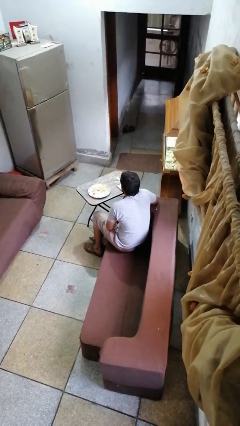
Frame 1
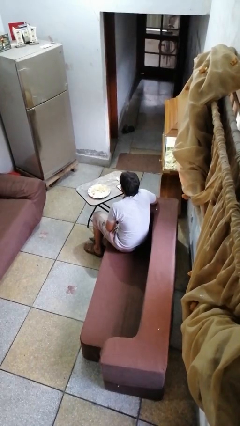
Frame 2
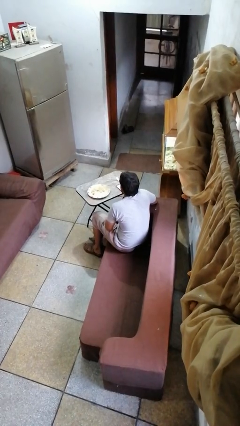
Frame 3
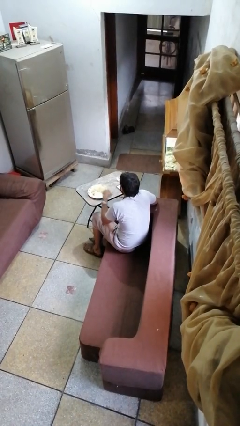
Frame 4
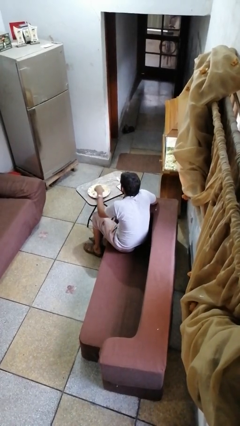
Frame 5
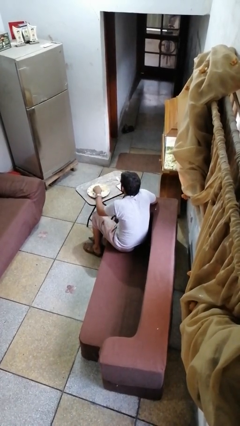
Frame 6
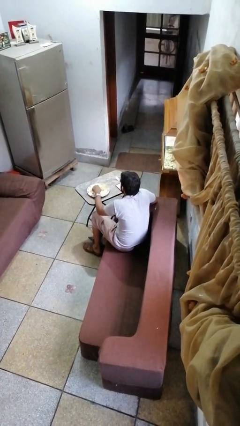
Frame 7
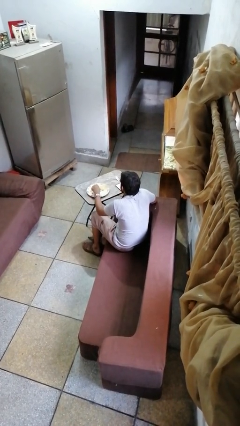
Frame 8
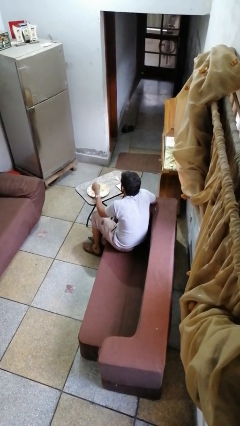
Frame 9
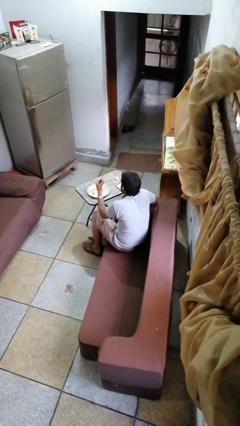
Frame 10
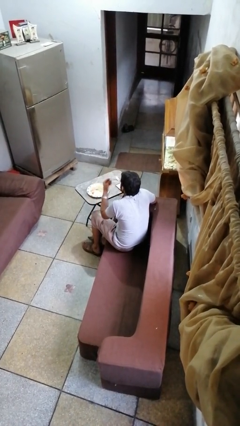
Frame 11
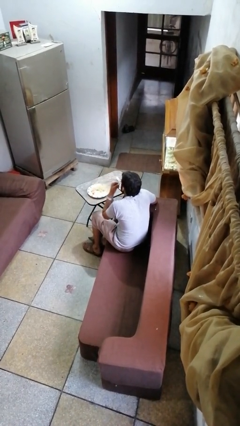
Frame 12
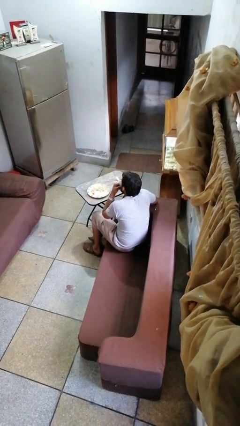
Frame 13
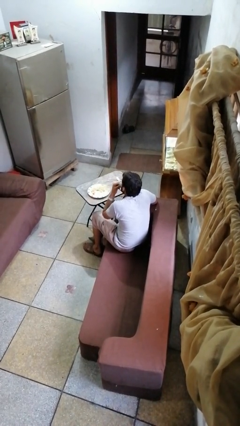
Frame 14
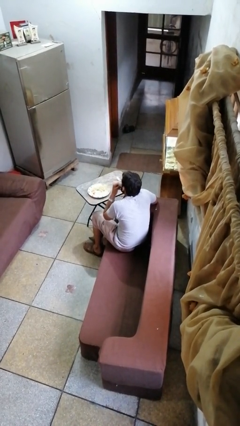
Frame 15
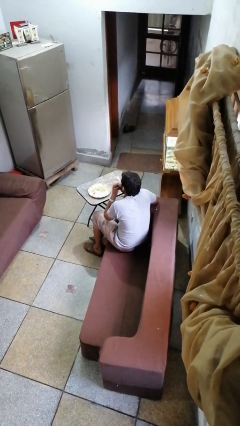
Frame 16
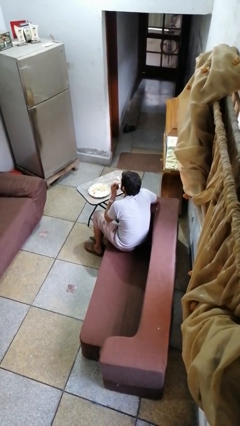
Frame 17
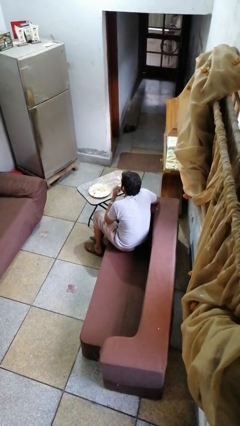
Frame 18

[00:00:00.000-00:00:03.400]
person eats with hands

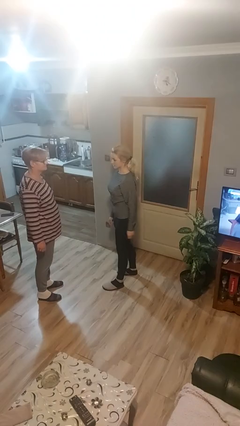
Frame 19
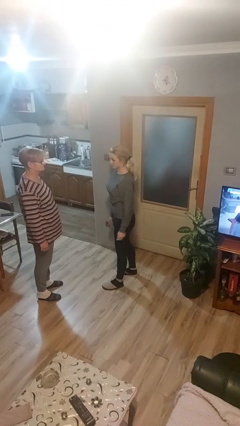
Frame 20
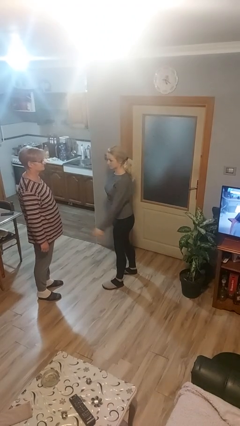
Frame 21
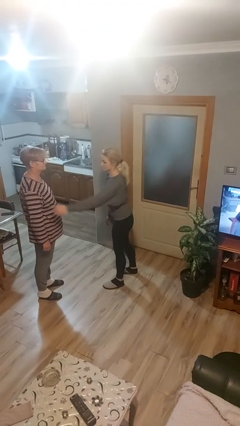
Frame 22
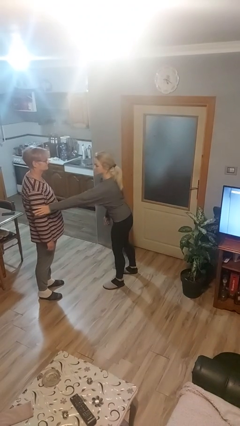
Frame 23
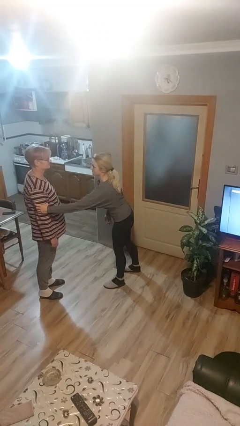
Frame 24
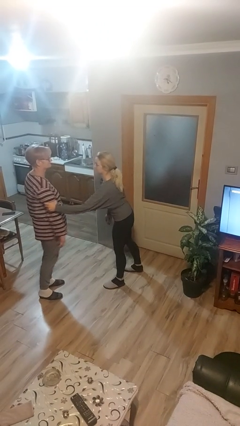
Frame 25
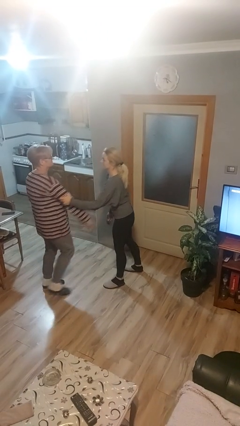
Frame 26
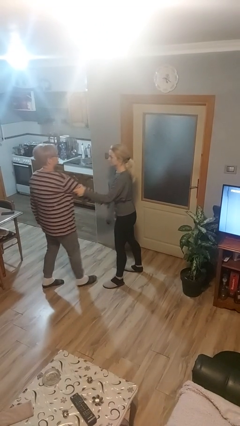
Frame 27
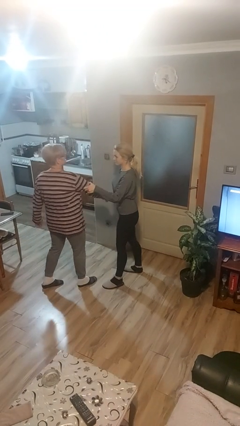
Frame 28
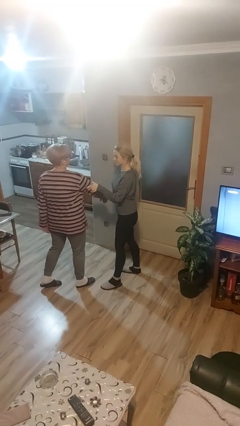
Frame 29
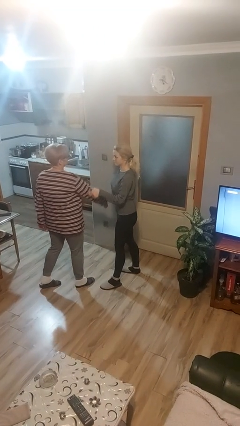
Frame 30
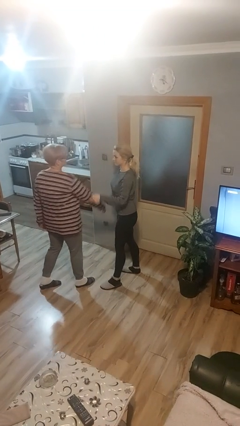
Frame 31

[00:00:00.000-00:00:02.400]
person grabs person by bicep

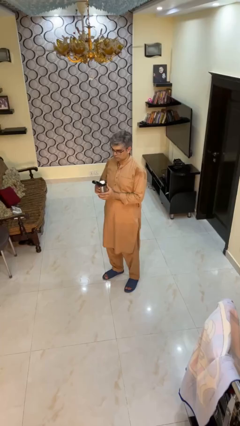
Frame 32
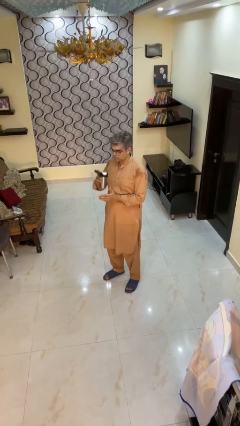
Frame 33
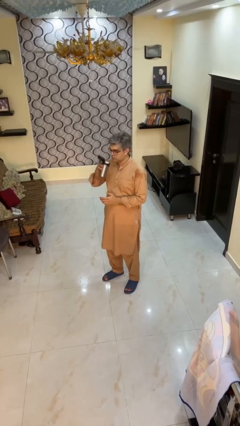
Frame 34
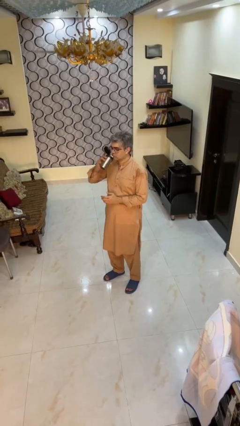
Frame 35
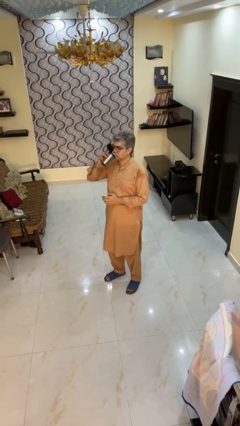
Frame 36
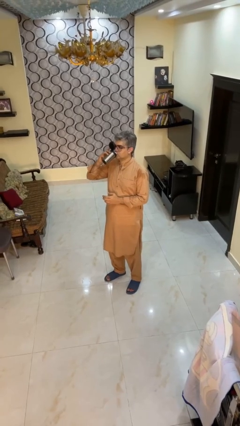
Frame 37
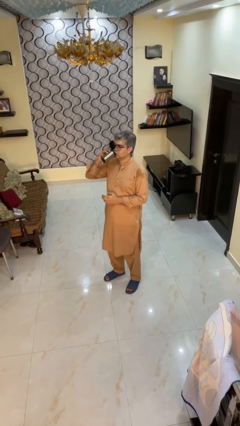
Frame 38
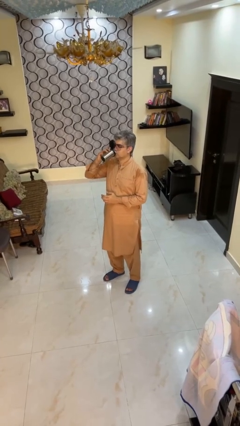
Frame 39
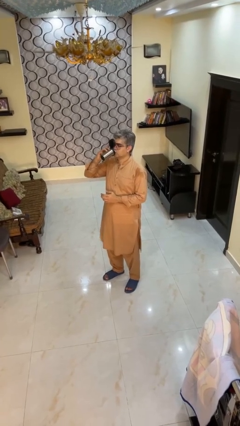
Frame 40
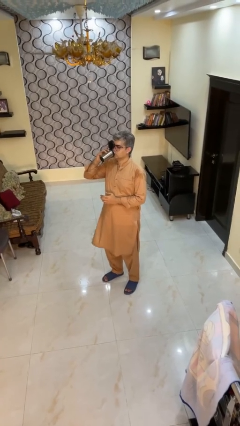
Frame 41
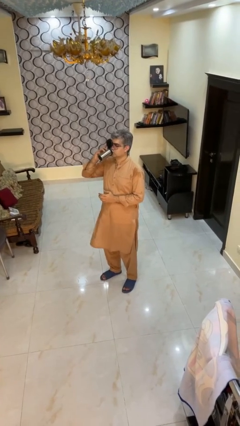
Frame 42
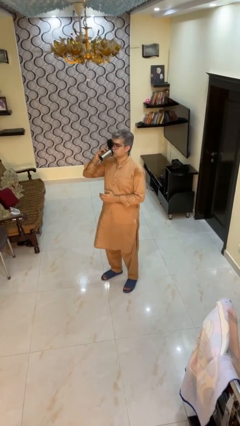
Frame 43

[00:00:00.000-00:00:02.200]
person drinks from beverage can

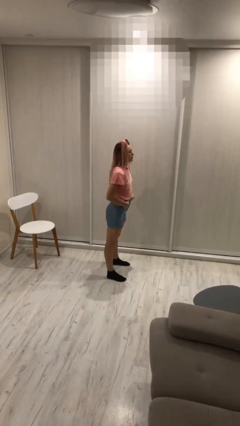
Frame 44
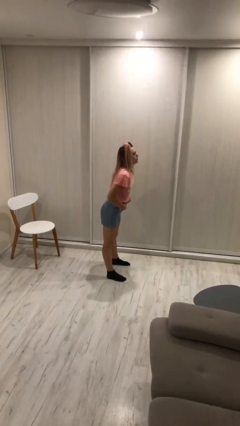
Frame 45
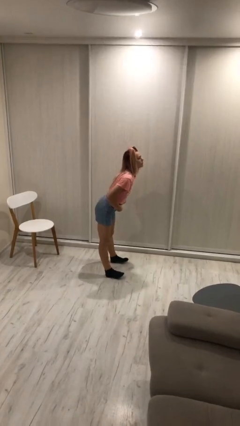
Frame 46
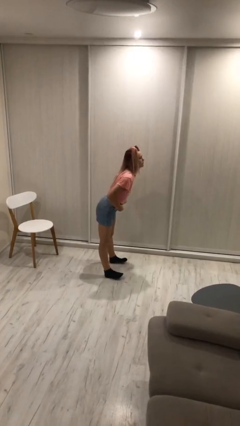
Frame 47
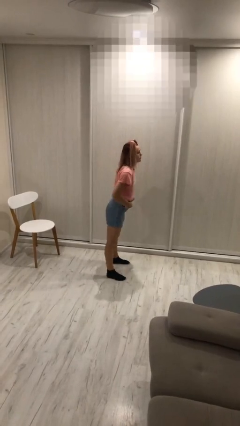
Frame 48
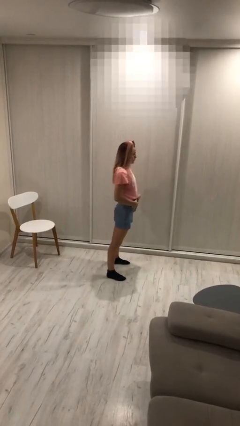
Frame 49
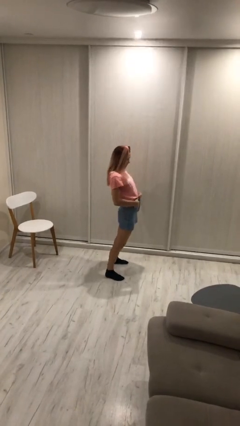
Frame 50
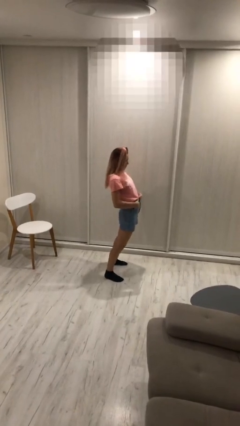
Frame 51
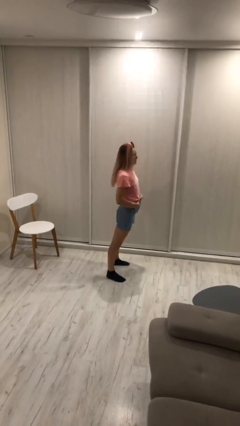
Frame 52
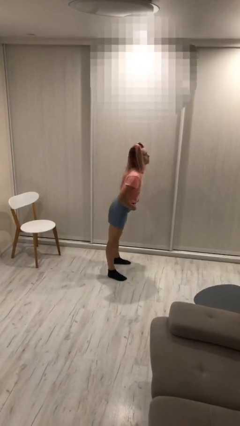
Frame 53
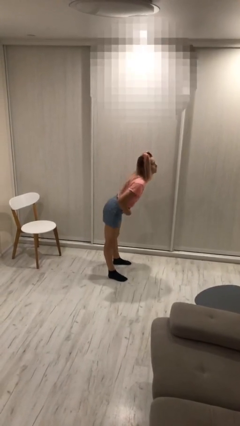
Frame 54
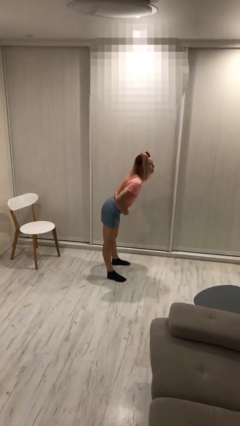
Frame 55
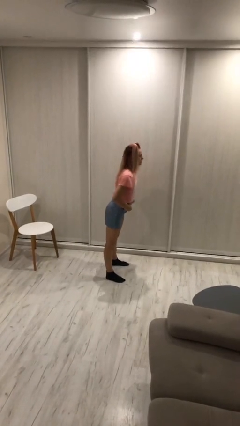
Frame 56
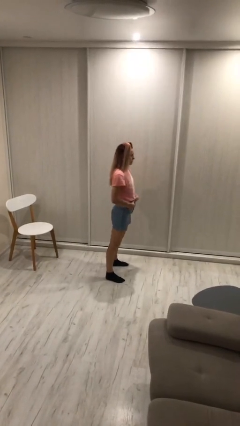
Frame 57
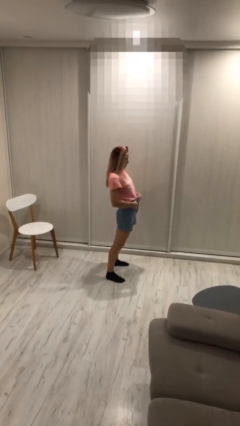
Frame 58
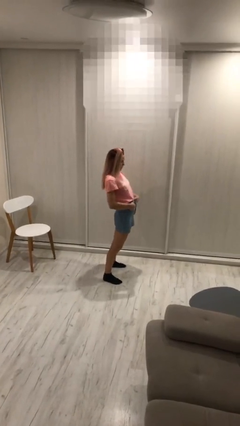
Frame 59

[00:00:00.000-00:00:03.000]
person wiggles hips

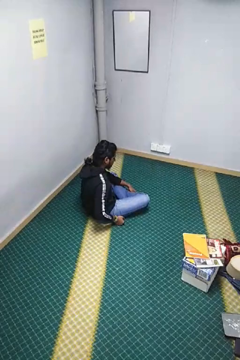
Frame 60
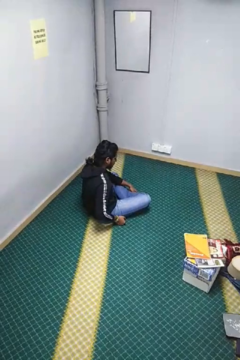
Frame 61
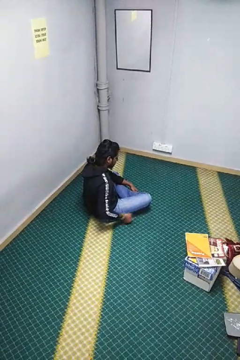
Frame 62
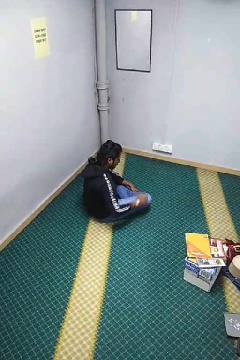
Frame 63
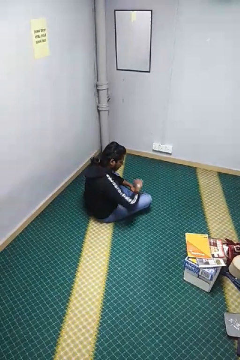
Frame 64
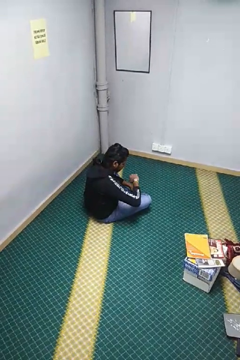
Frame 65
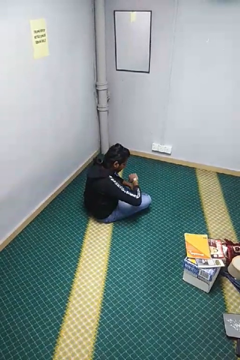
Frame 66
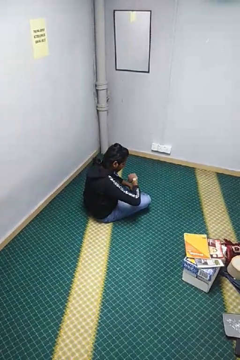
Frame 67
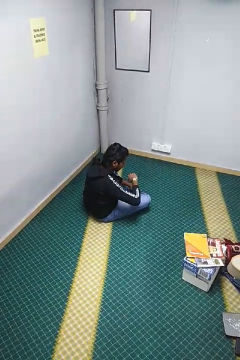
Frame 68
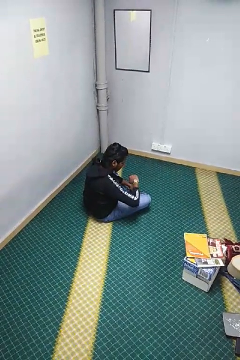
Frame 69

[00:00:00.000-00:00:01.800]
person looks at wristwatch

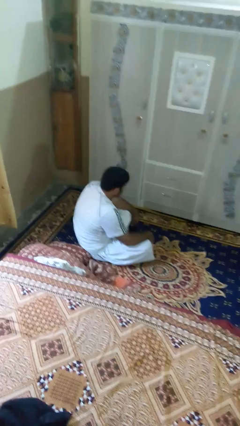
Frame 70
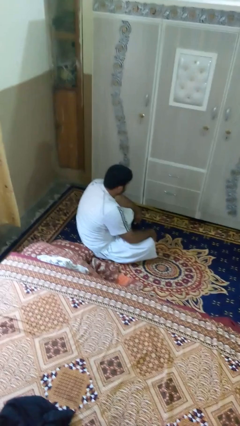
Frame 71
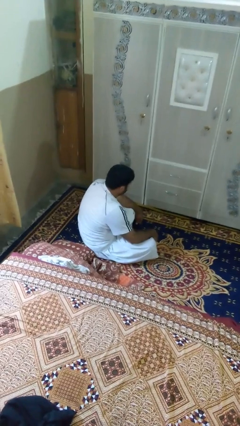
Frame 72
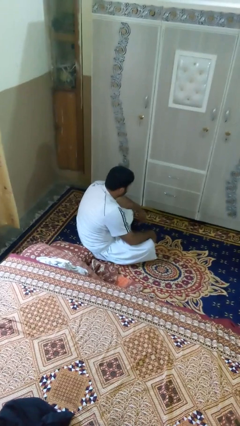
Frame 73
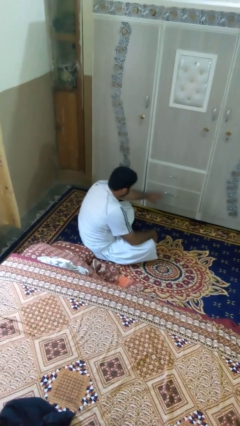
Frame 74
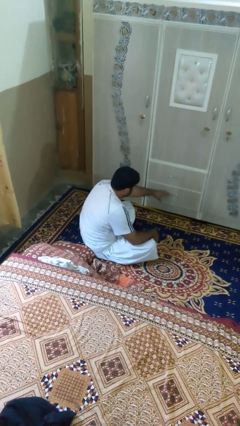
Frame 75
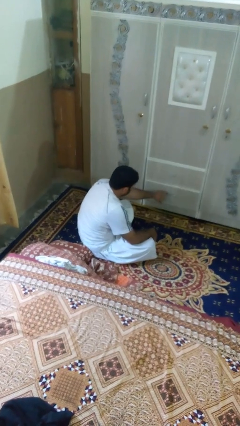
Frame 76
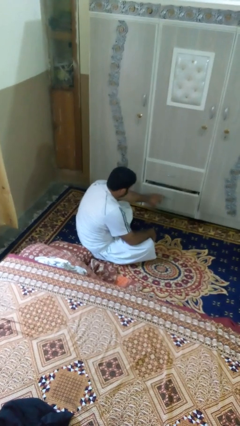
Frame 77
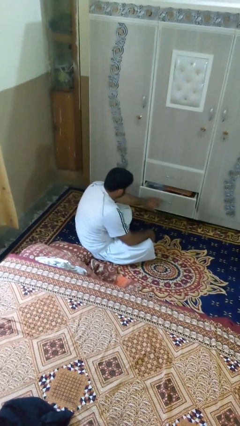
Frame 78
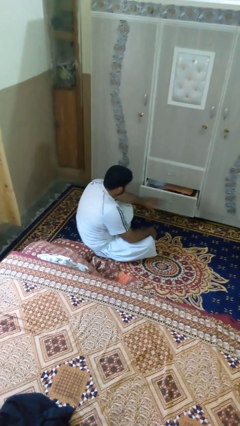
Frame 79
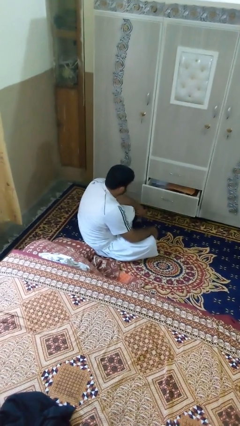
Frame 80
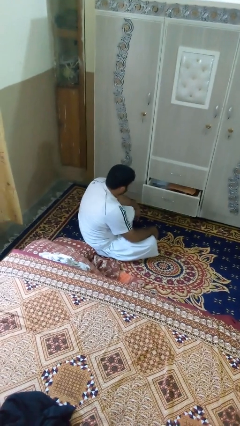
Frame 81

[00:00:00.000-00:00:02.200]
person opens dresser drawer

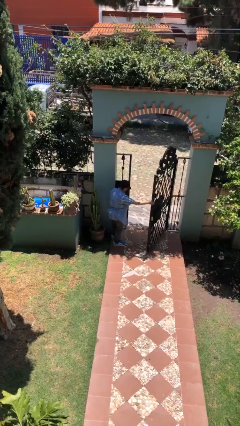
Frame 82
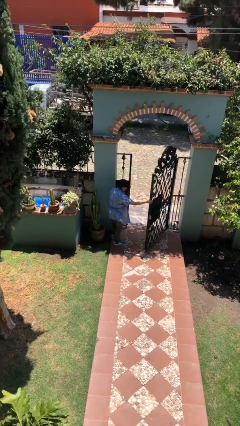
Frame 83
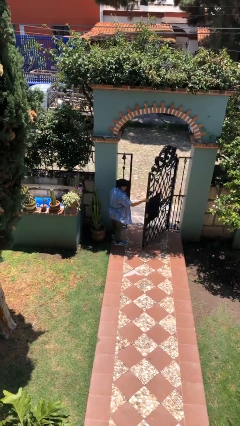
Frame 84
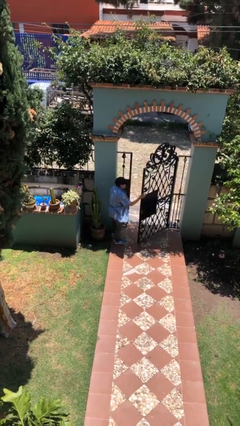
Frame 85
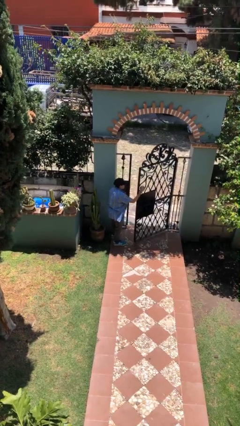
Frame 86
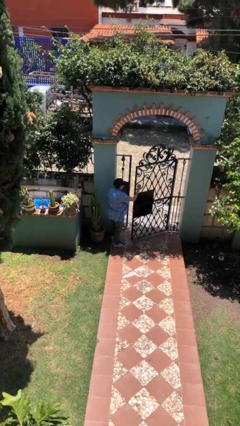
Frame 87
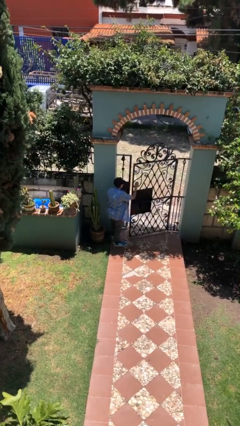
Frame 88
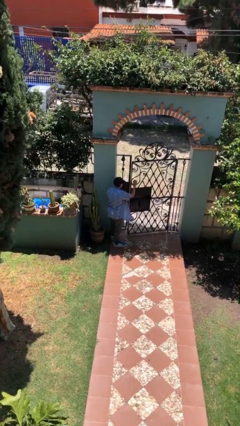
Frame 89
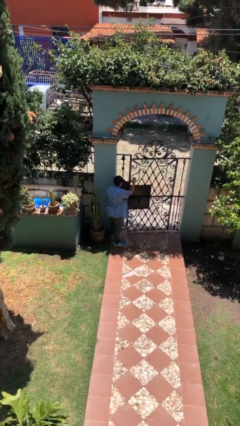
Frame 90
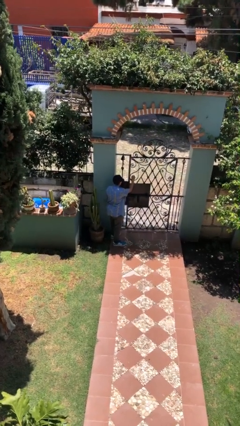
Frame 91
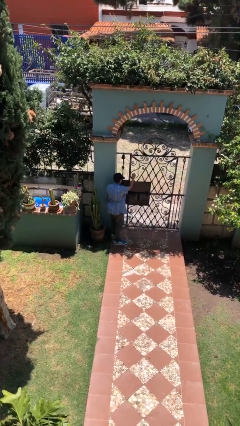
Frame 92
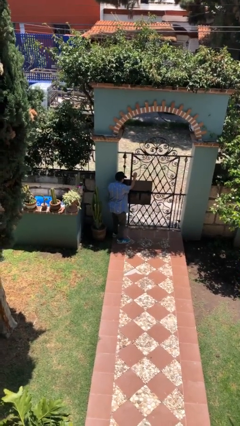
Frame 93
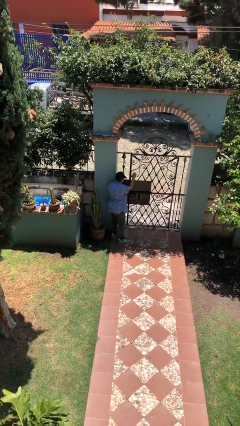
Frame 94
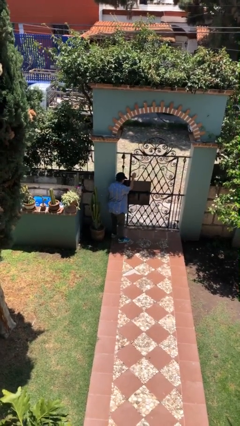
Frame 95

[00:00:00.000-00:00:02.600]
person closes facility door
